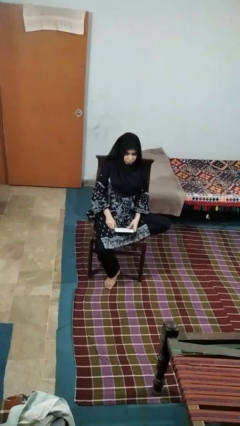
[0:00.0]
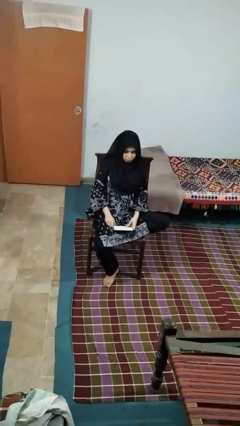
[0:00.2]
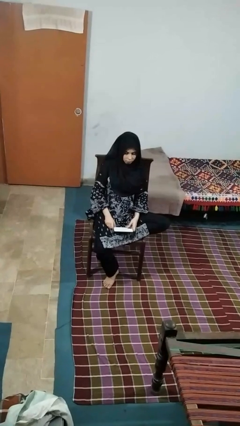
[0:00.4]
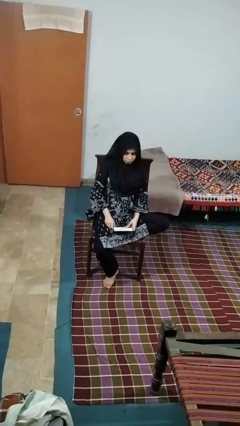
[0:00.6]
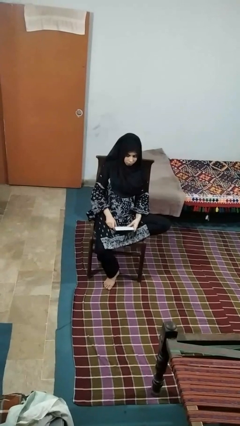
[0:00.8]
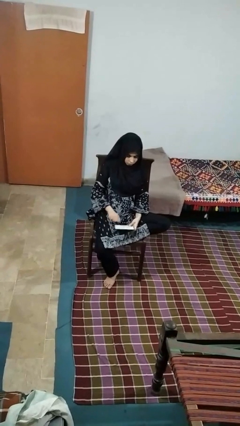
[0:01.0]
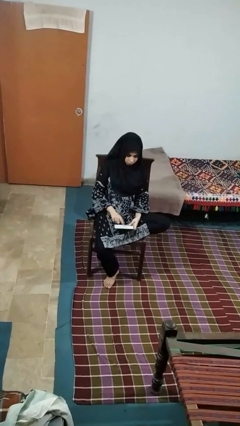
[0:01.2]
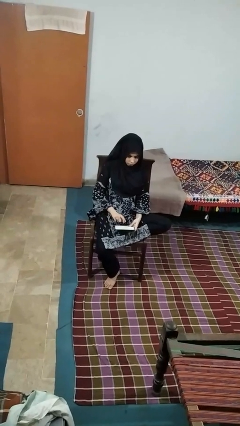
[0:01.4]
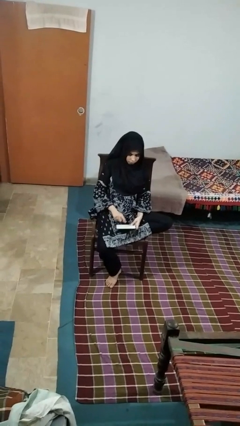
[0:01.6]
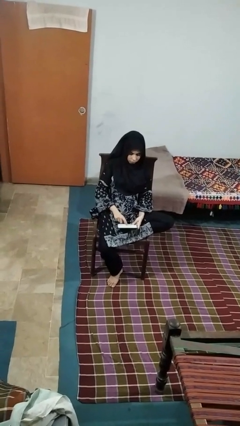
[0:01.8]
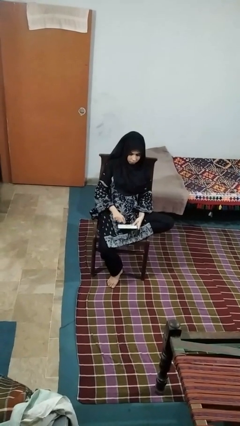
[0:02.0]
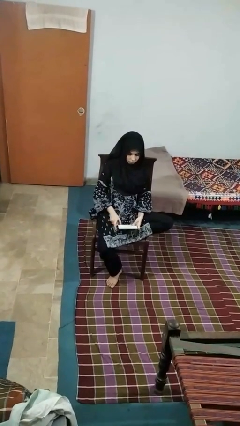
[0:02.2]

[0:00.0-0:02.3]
person taps object with finger

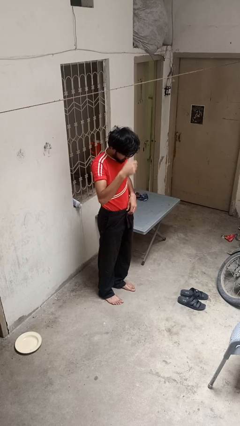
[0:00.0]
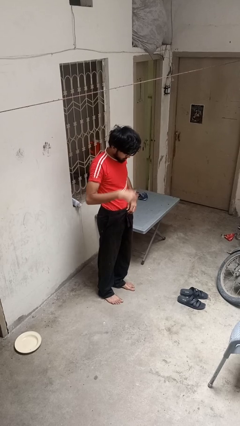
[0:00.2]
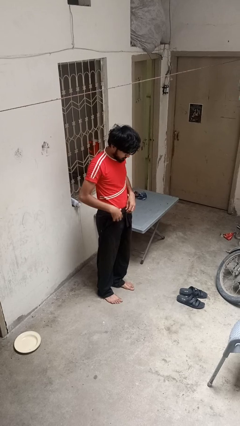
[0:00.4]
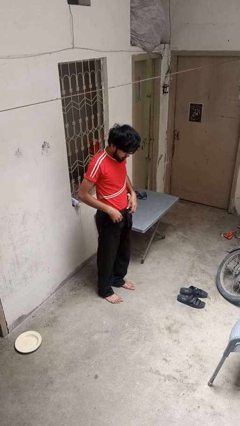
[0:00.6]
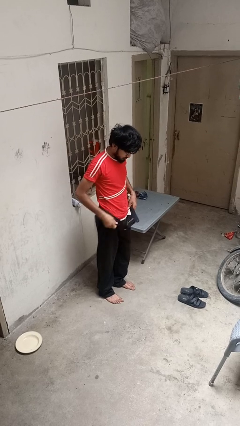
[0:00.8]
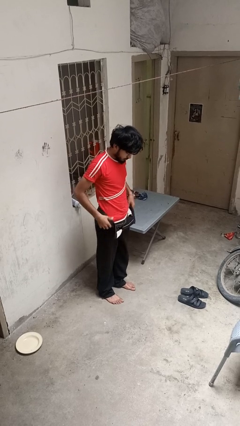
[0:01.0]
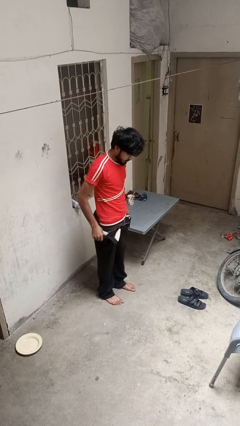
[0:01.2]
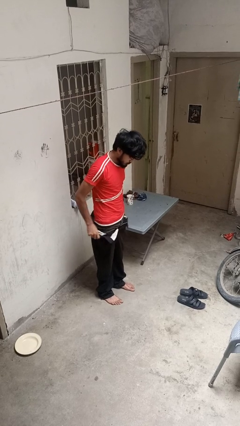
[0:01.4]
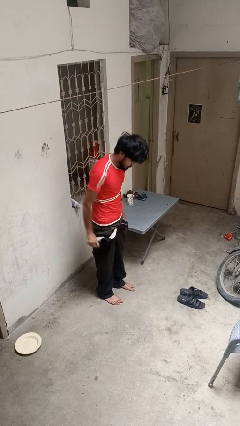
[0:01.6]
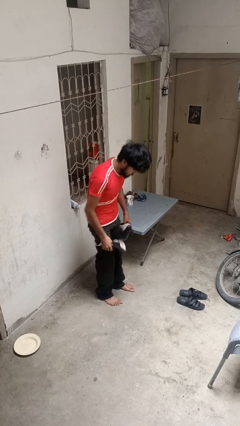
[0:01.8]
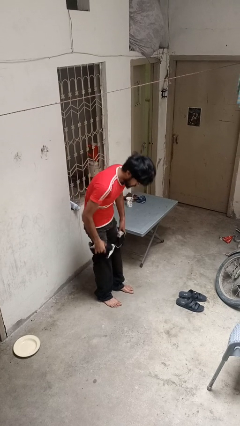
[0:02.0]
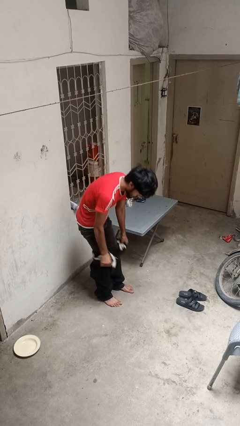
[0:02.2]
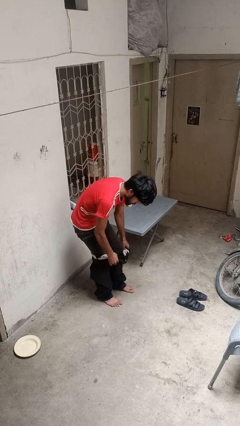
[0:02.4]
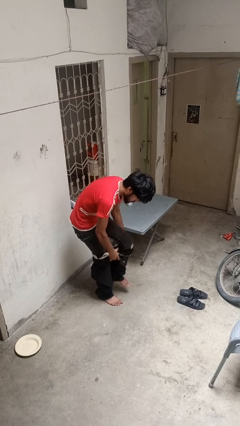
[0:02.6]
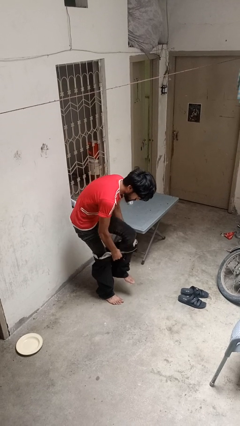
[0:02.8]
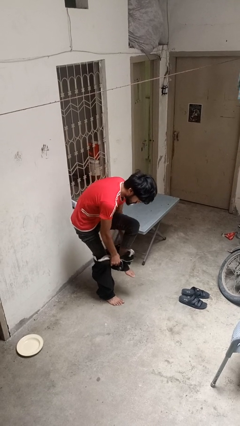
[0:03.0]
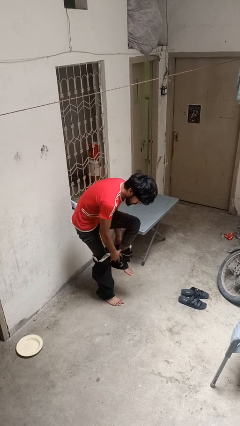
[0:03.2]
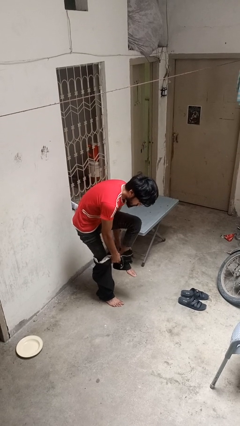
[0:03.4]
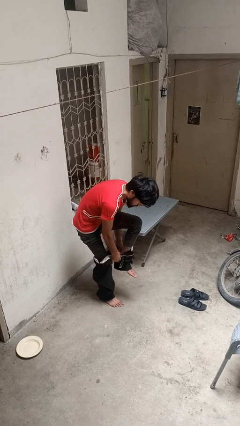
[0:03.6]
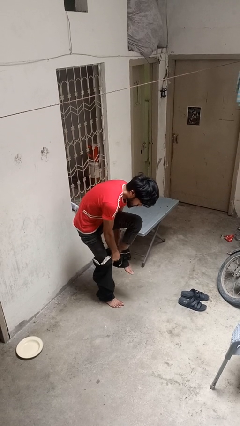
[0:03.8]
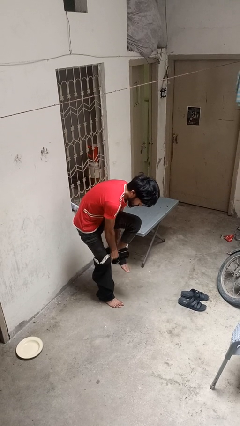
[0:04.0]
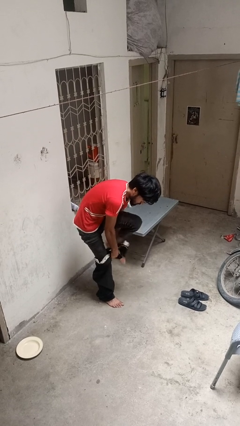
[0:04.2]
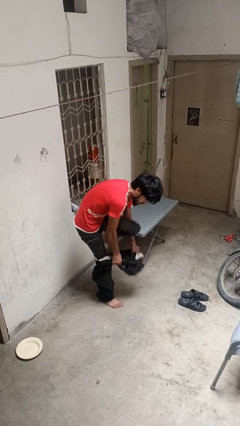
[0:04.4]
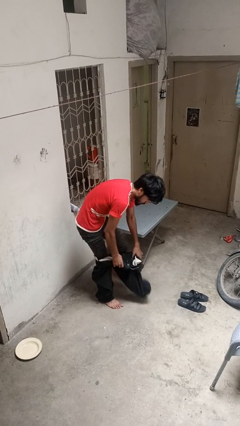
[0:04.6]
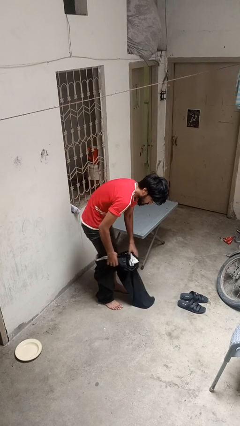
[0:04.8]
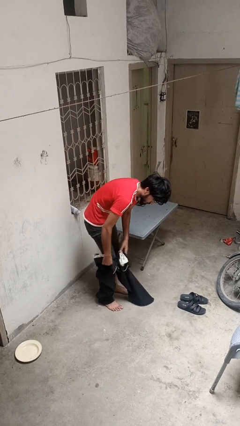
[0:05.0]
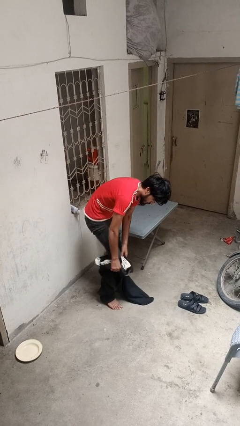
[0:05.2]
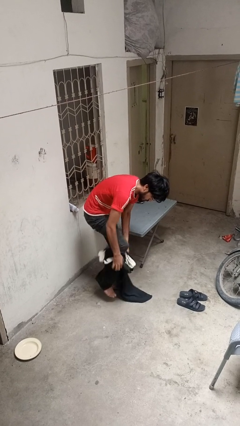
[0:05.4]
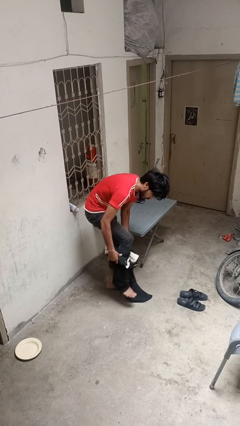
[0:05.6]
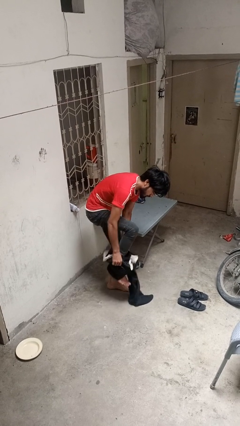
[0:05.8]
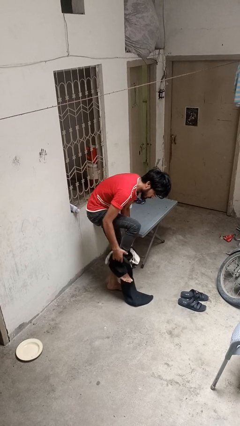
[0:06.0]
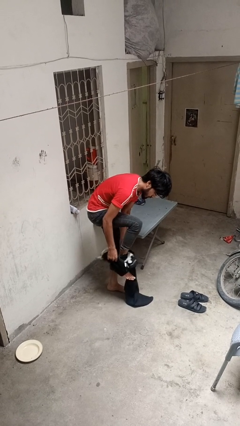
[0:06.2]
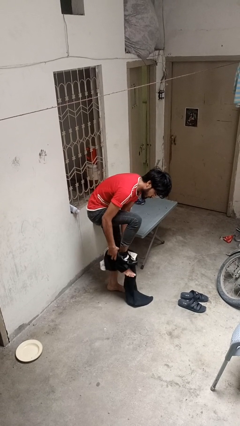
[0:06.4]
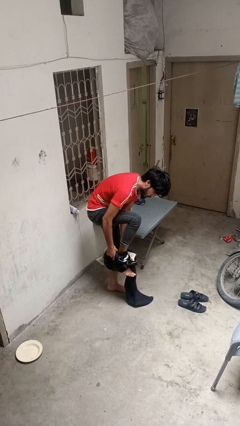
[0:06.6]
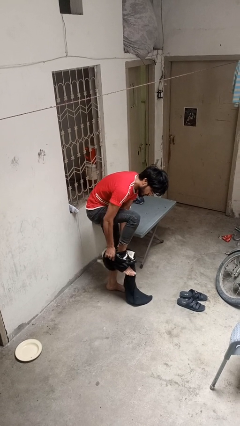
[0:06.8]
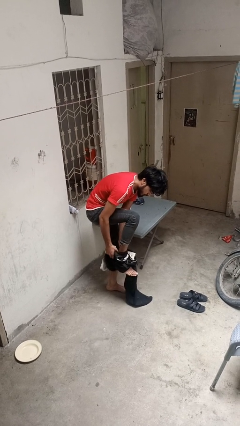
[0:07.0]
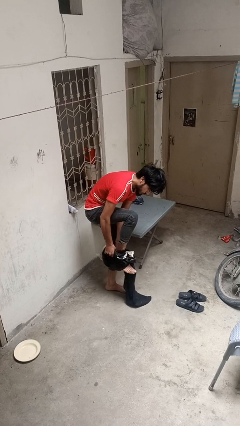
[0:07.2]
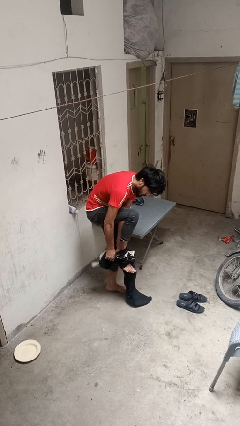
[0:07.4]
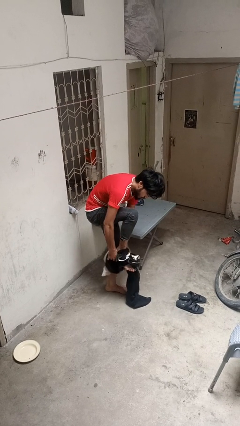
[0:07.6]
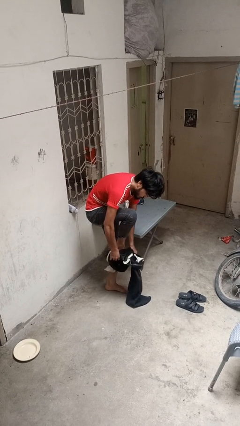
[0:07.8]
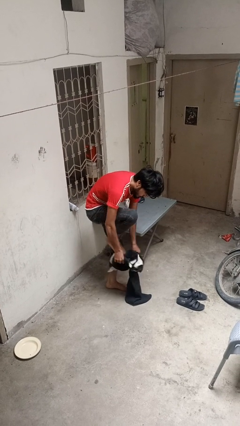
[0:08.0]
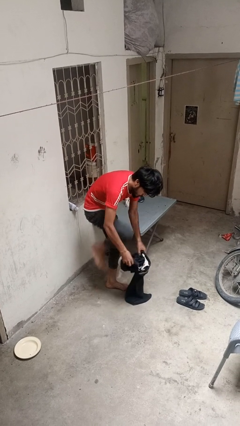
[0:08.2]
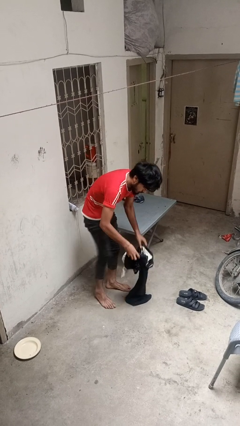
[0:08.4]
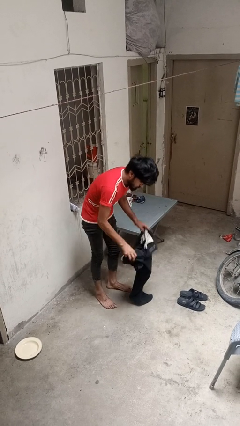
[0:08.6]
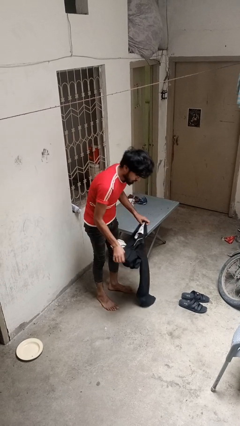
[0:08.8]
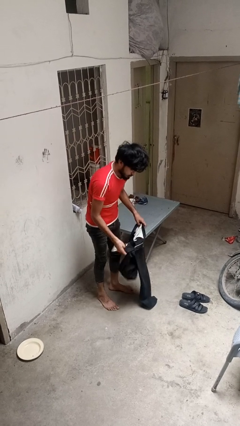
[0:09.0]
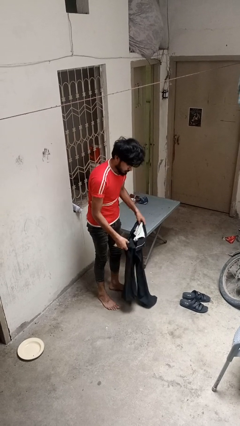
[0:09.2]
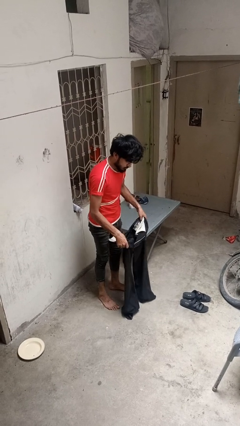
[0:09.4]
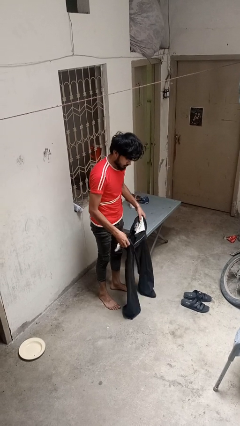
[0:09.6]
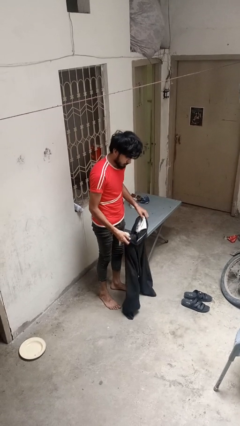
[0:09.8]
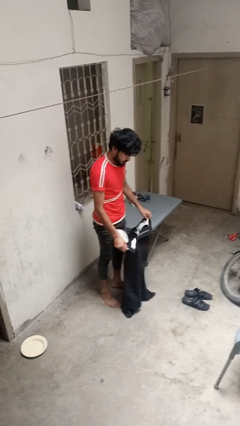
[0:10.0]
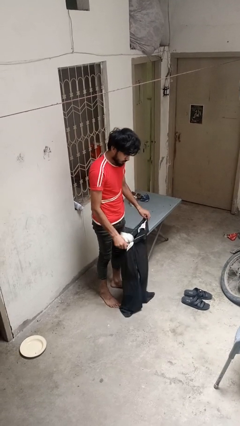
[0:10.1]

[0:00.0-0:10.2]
person takes off pants

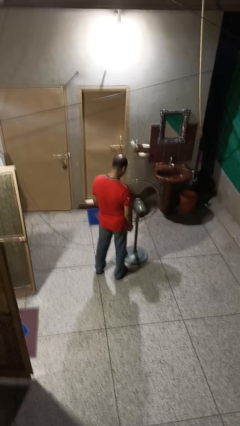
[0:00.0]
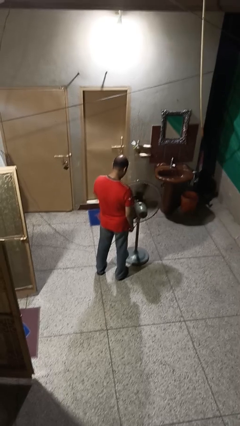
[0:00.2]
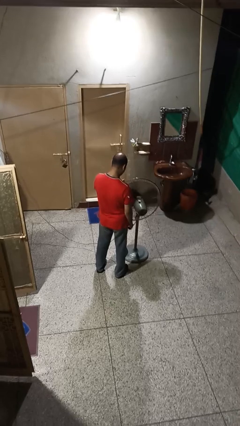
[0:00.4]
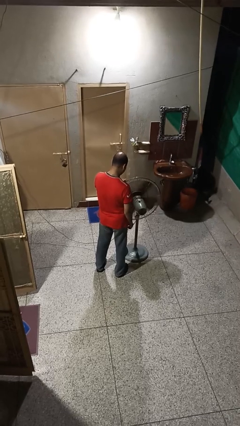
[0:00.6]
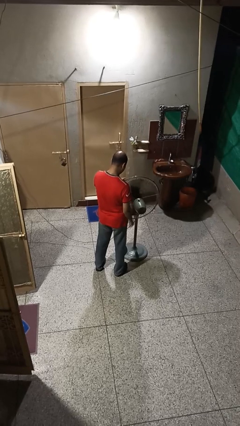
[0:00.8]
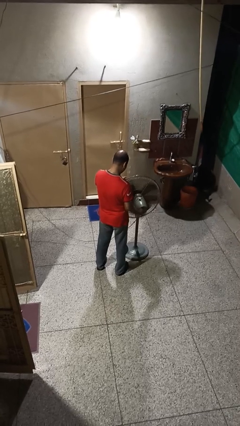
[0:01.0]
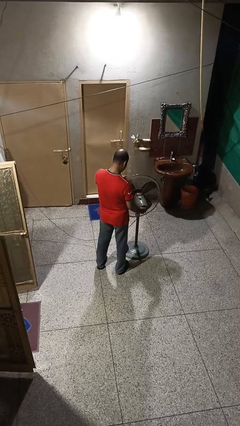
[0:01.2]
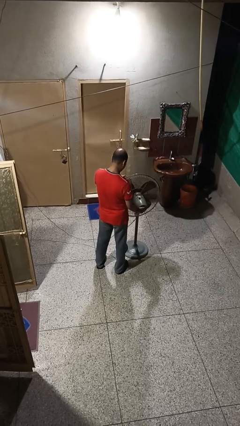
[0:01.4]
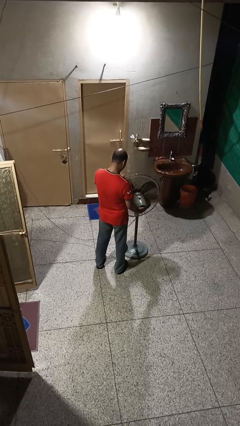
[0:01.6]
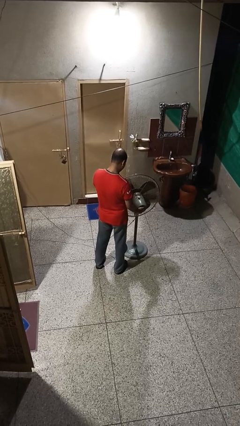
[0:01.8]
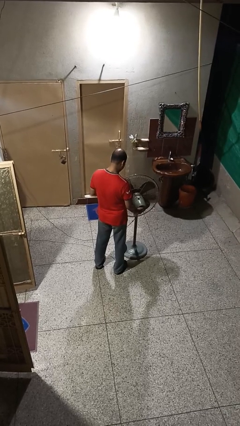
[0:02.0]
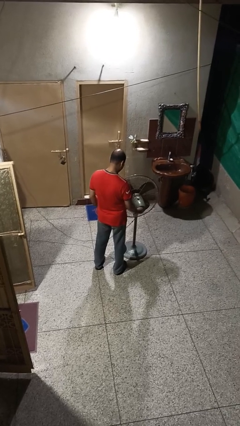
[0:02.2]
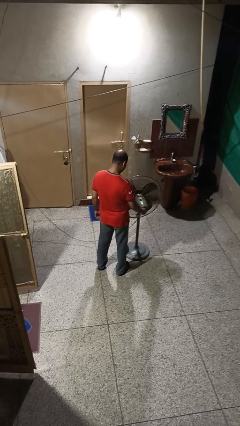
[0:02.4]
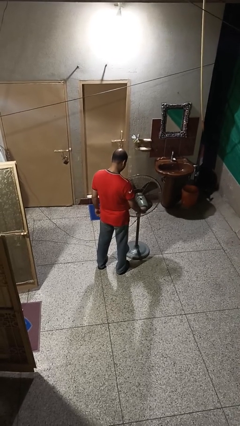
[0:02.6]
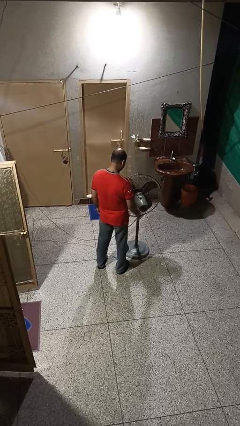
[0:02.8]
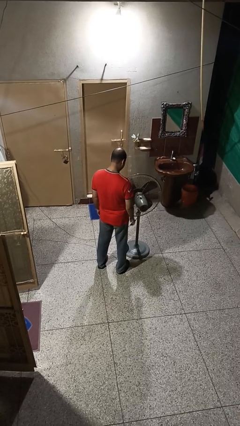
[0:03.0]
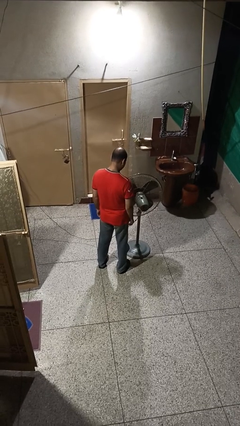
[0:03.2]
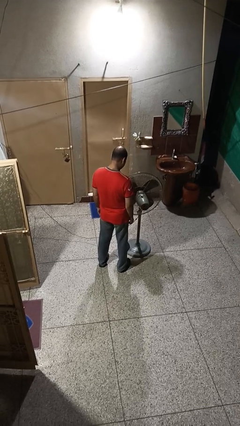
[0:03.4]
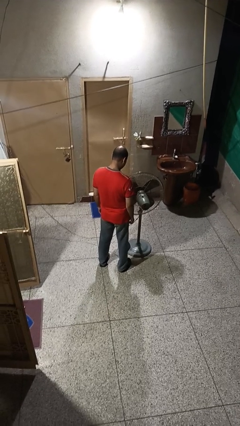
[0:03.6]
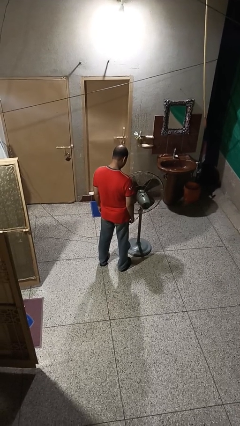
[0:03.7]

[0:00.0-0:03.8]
person turns off fan

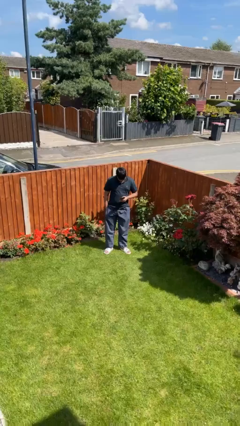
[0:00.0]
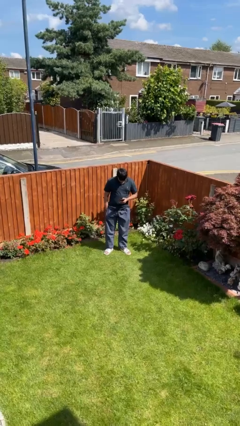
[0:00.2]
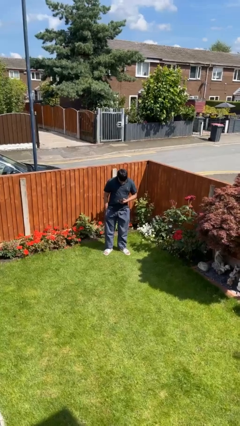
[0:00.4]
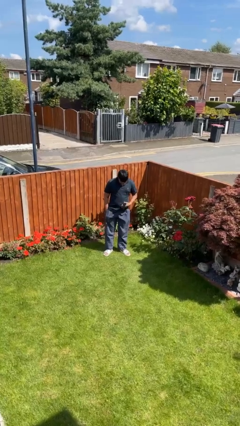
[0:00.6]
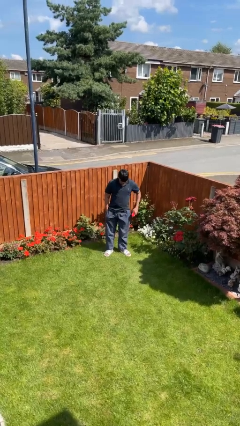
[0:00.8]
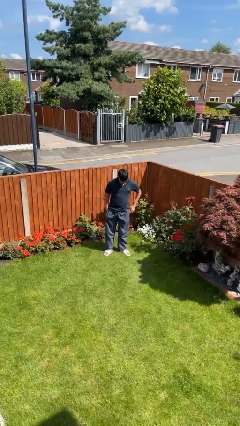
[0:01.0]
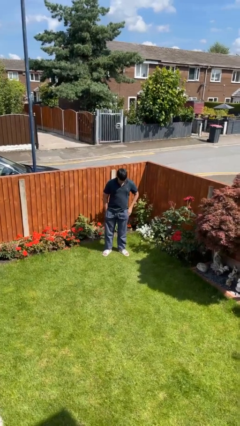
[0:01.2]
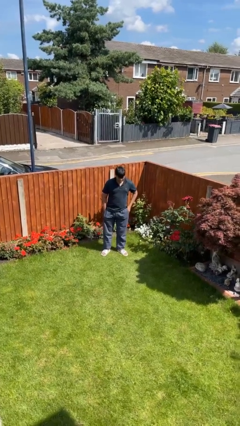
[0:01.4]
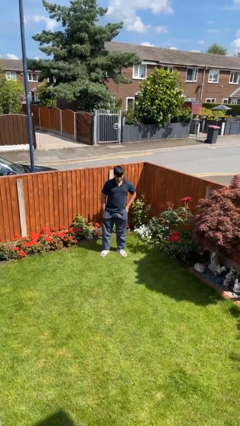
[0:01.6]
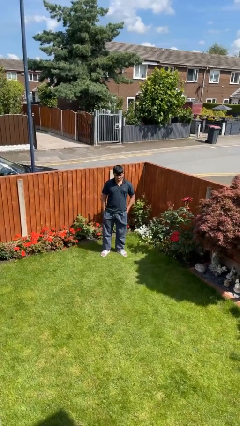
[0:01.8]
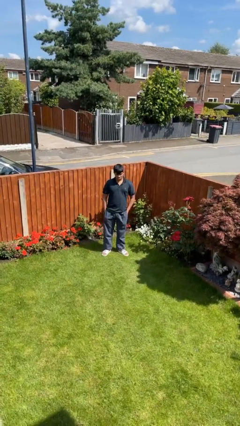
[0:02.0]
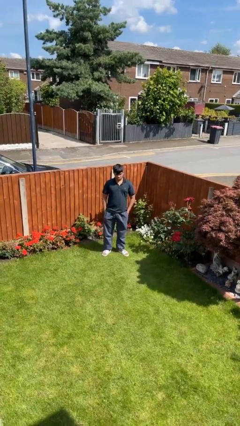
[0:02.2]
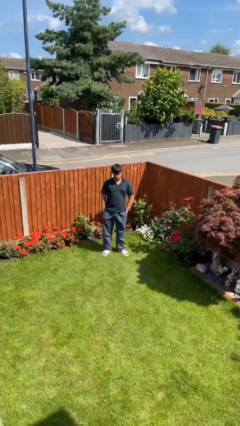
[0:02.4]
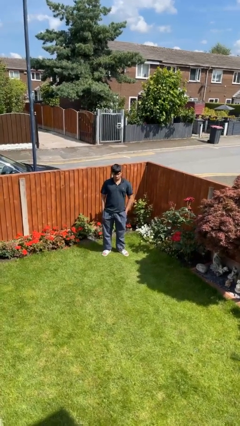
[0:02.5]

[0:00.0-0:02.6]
person puts phone into pocket
